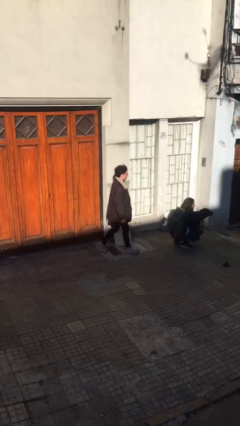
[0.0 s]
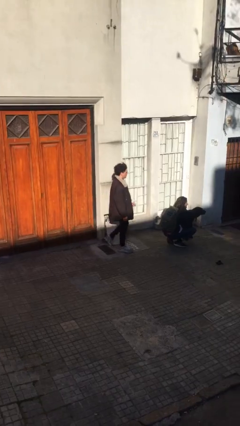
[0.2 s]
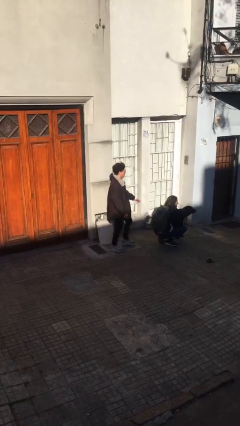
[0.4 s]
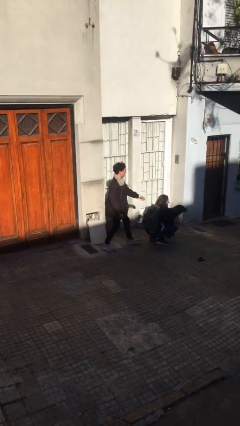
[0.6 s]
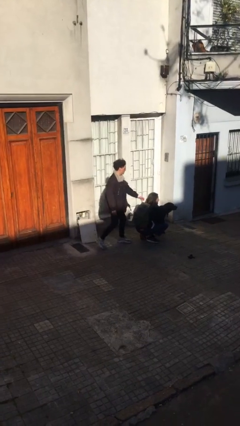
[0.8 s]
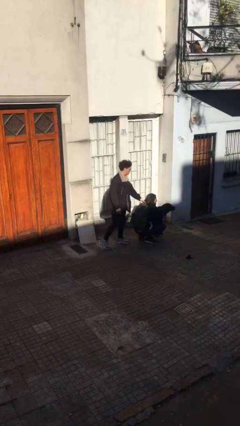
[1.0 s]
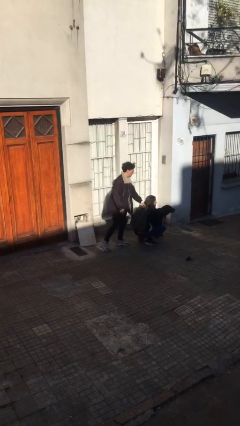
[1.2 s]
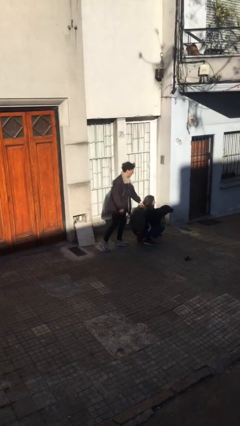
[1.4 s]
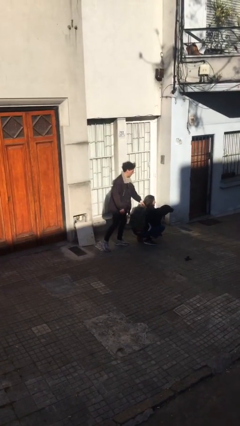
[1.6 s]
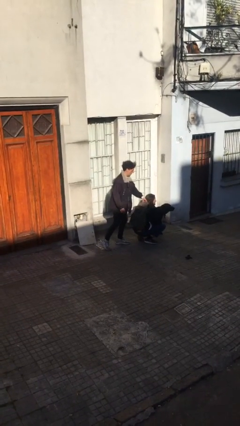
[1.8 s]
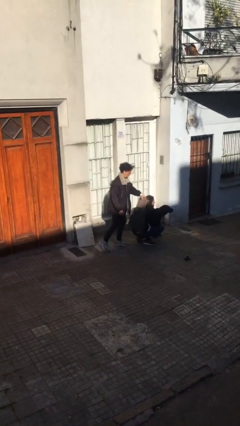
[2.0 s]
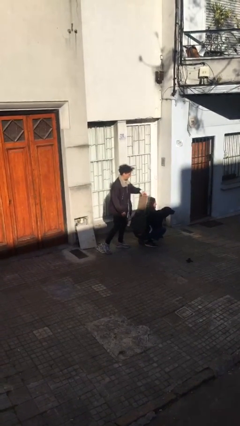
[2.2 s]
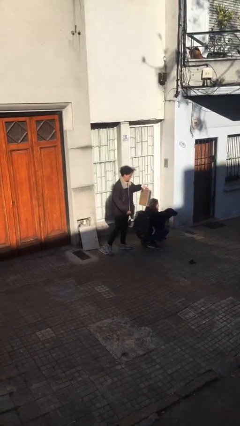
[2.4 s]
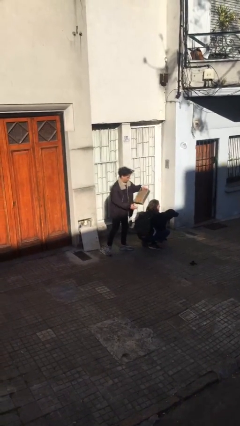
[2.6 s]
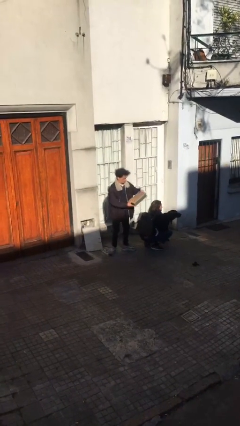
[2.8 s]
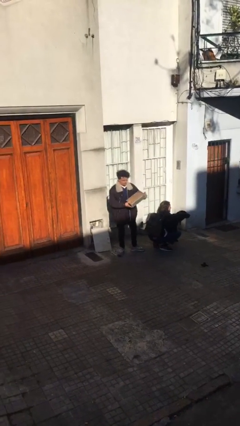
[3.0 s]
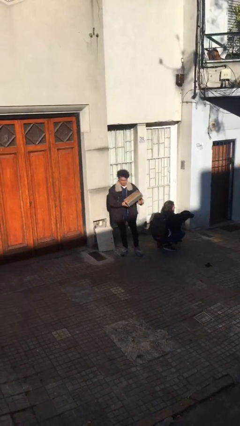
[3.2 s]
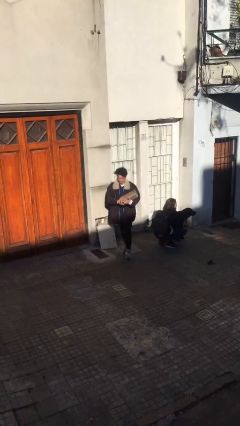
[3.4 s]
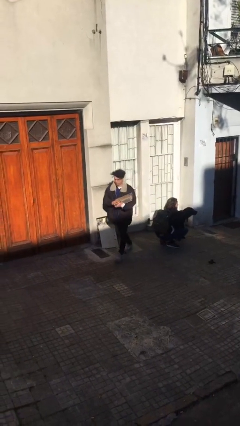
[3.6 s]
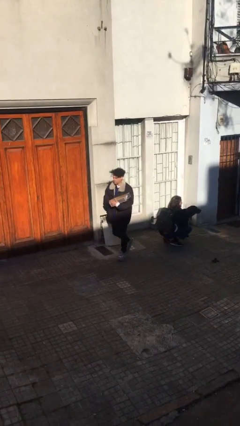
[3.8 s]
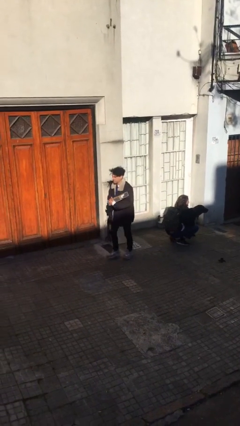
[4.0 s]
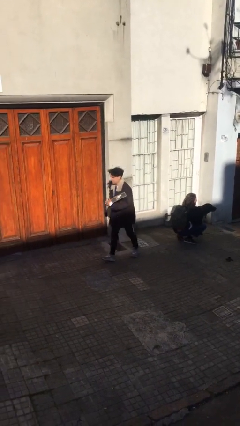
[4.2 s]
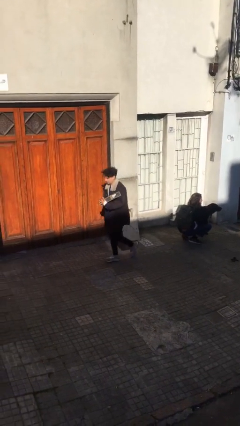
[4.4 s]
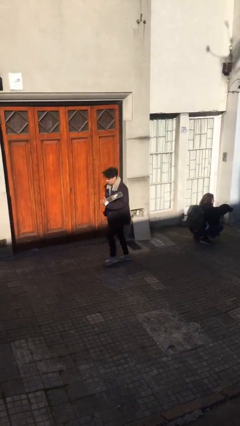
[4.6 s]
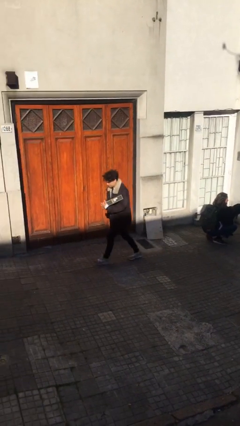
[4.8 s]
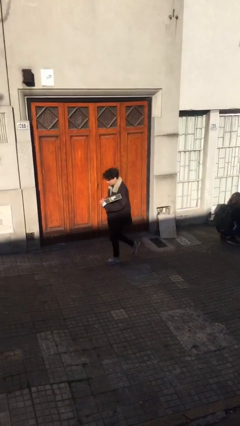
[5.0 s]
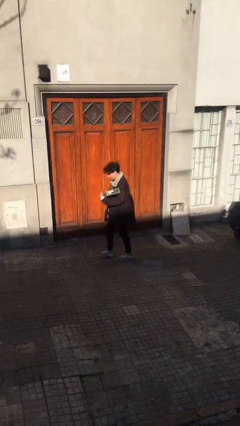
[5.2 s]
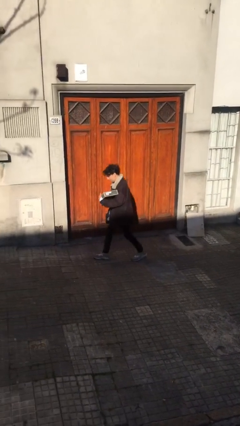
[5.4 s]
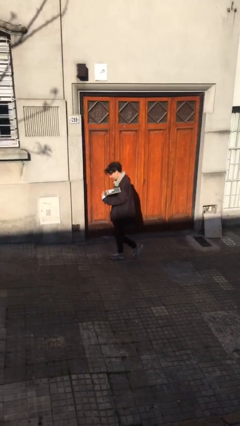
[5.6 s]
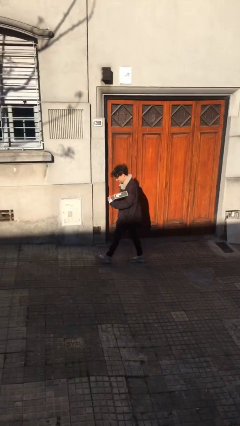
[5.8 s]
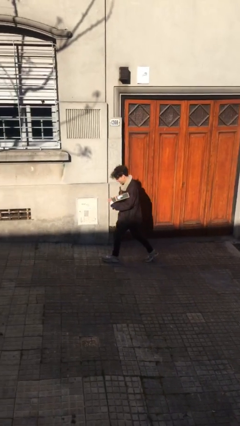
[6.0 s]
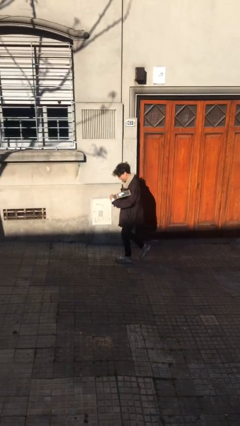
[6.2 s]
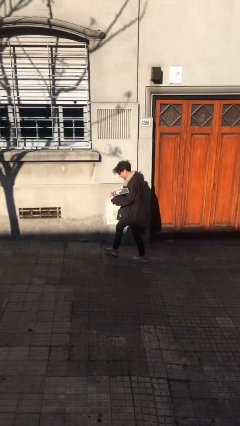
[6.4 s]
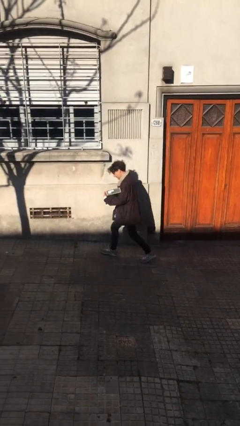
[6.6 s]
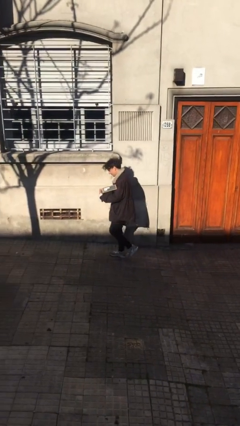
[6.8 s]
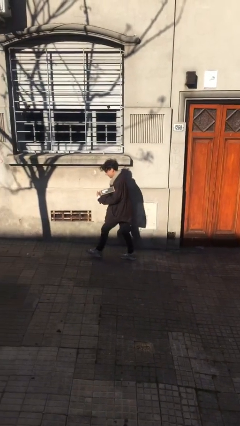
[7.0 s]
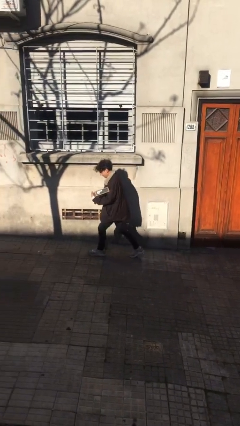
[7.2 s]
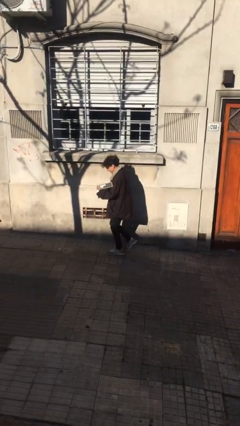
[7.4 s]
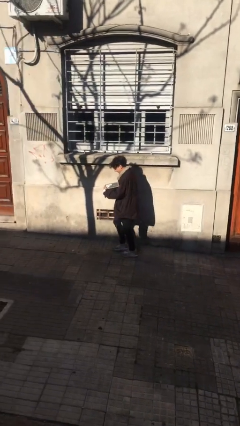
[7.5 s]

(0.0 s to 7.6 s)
person steals object from person

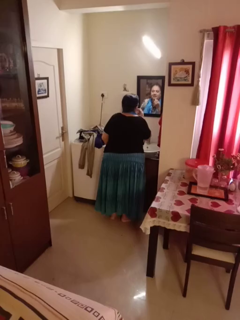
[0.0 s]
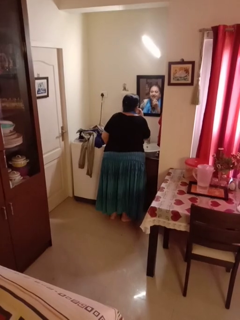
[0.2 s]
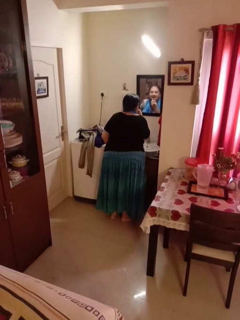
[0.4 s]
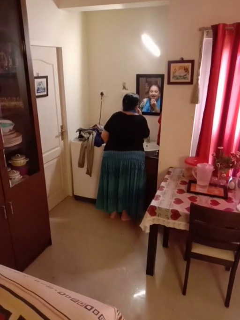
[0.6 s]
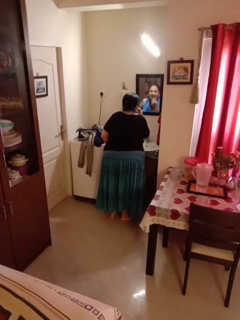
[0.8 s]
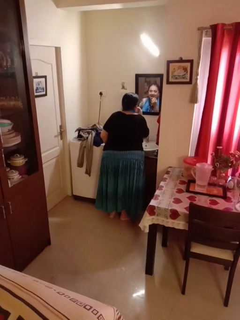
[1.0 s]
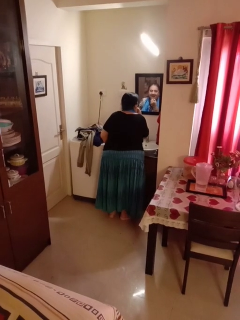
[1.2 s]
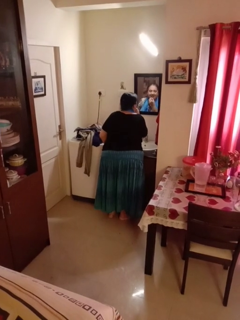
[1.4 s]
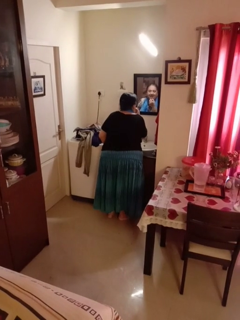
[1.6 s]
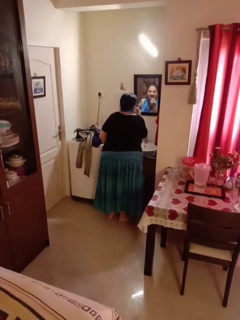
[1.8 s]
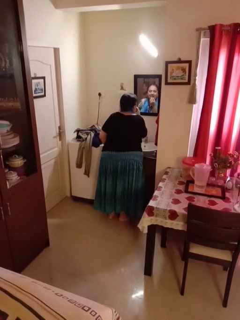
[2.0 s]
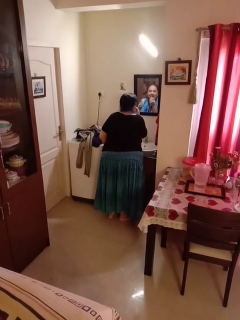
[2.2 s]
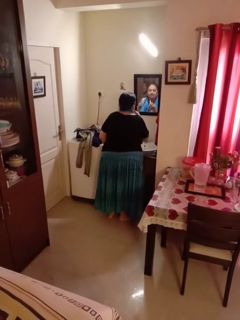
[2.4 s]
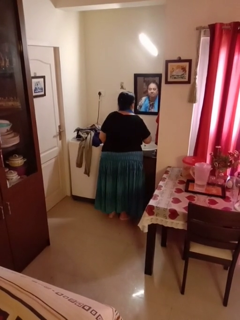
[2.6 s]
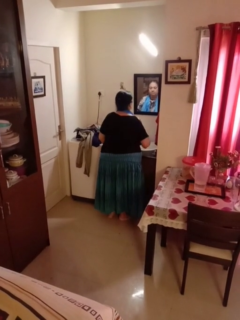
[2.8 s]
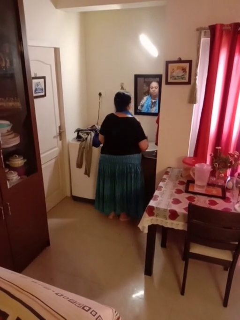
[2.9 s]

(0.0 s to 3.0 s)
person applies lip makeup

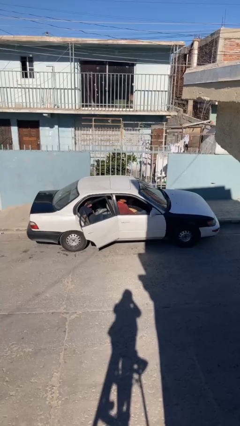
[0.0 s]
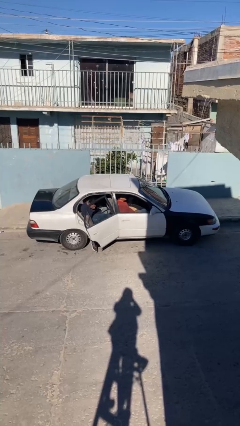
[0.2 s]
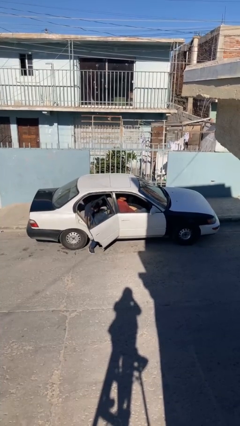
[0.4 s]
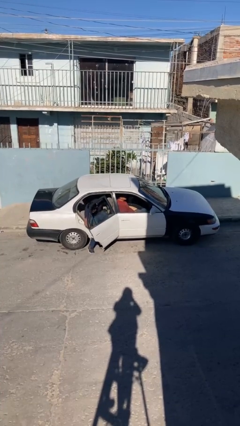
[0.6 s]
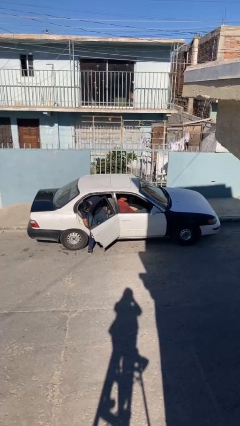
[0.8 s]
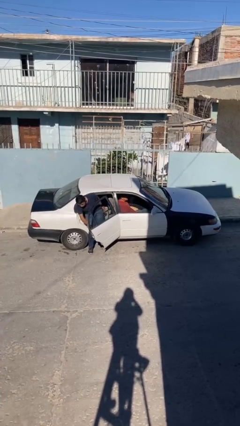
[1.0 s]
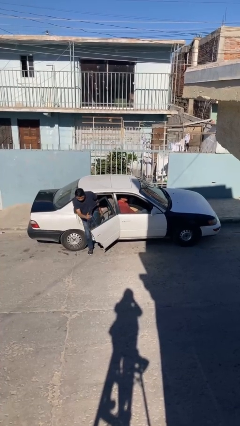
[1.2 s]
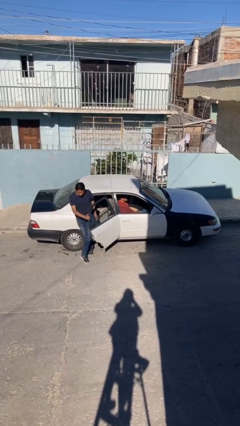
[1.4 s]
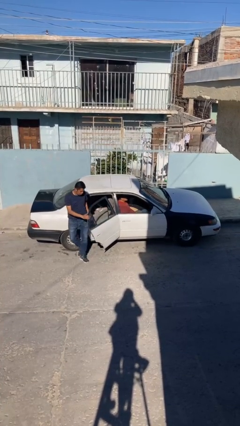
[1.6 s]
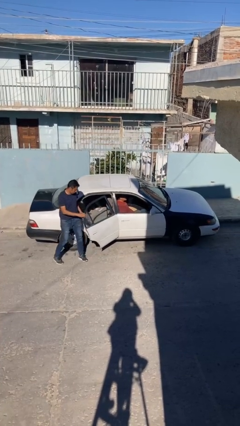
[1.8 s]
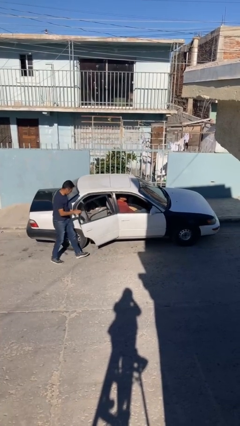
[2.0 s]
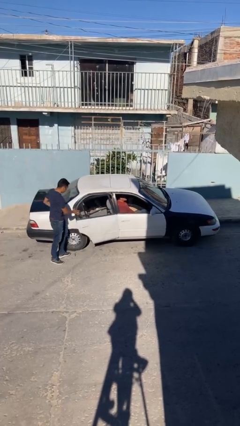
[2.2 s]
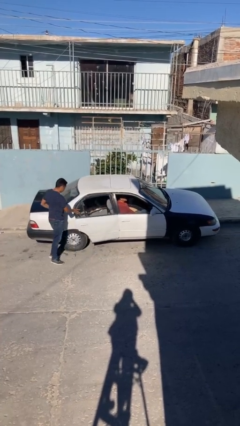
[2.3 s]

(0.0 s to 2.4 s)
car drops off person

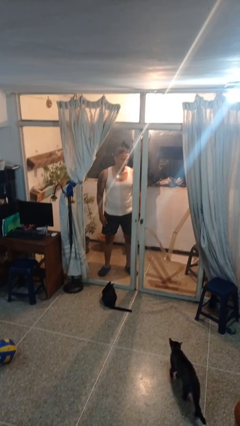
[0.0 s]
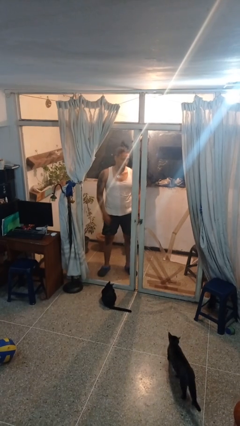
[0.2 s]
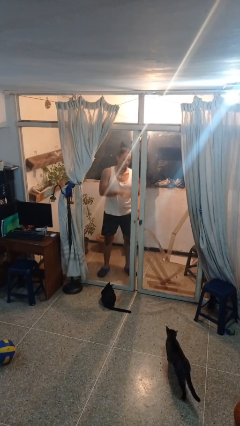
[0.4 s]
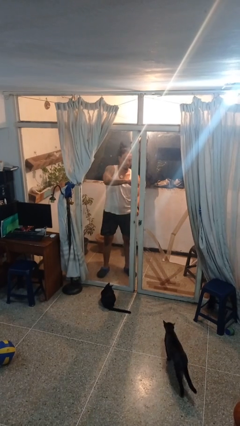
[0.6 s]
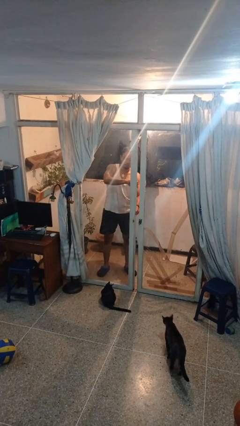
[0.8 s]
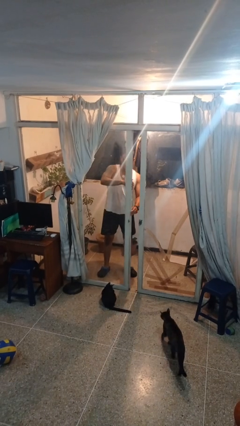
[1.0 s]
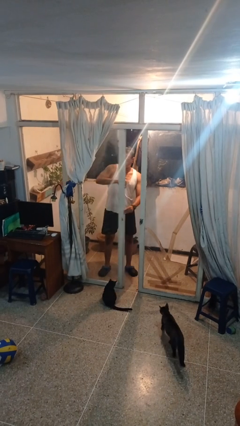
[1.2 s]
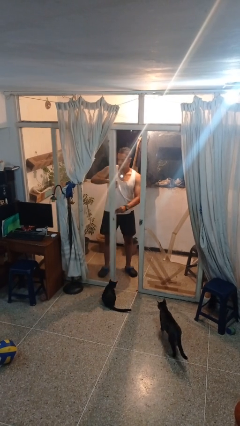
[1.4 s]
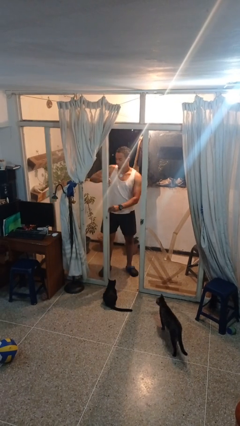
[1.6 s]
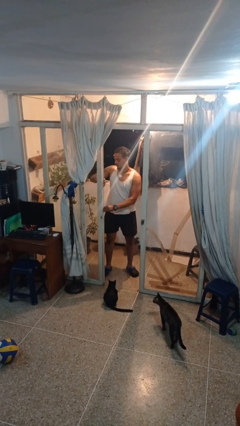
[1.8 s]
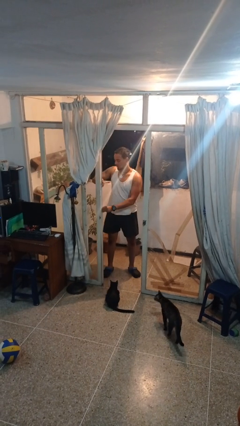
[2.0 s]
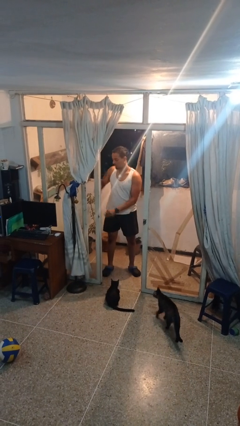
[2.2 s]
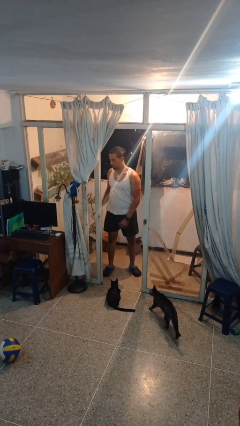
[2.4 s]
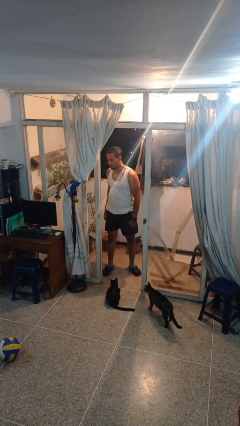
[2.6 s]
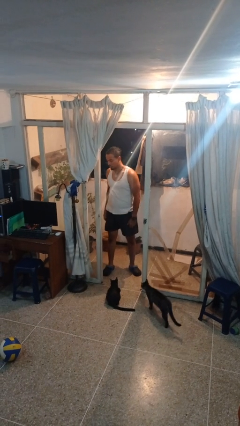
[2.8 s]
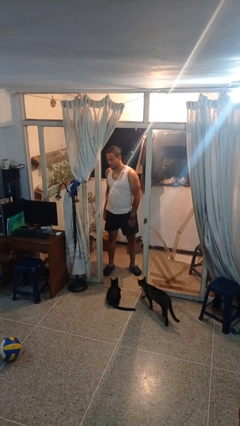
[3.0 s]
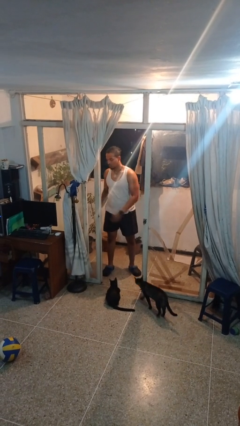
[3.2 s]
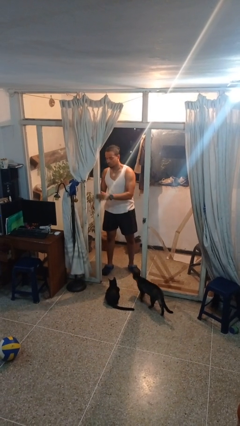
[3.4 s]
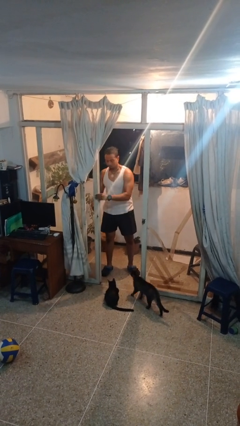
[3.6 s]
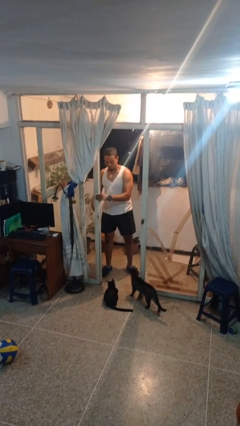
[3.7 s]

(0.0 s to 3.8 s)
person opens sliding door

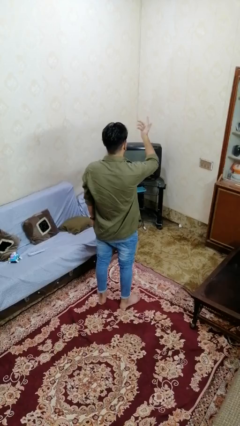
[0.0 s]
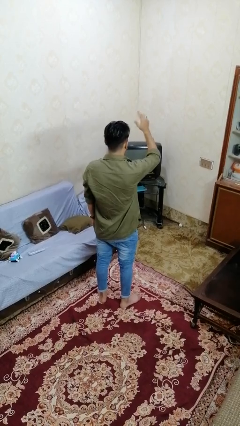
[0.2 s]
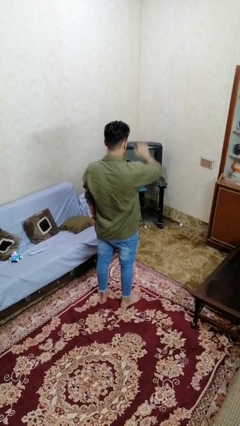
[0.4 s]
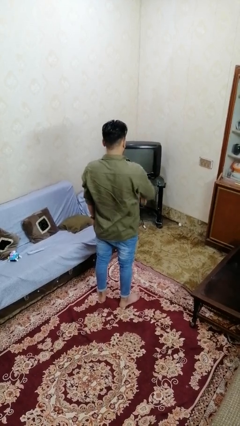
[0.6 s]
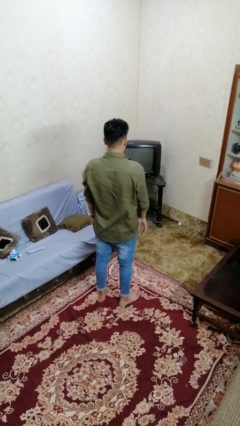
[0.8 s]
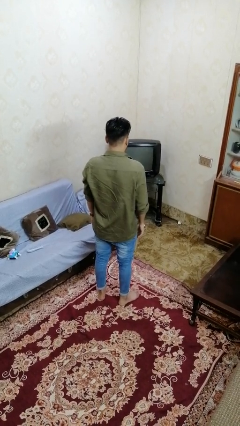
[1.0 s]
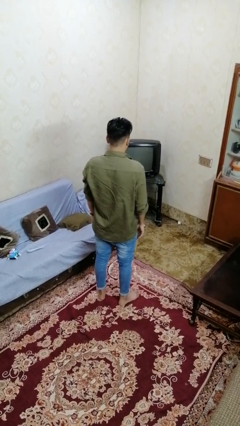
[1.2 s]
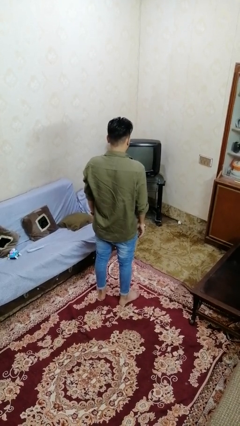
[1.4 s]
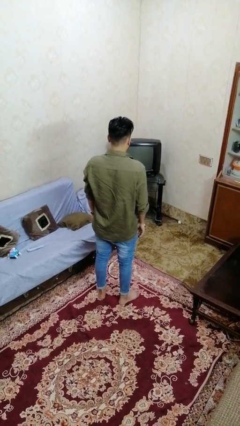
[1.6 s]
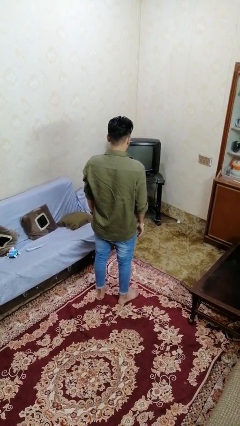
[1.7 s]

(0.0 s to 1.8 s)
person gestures lower hand
